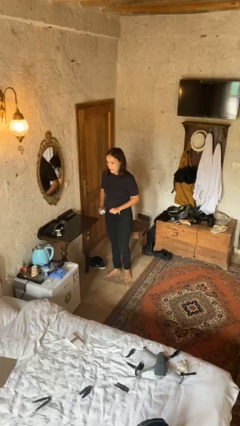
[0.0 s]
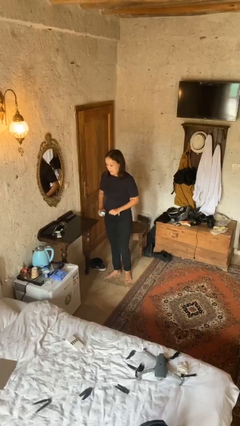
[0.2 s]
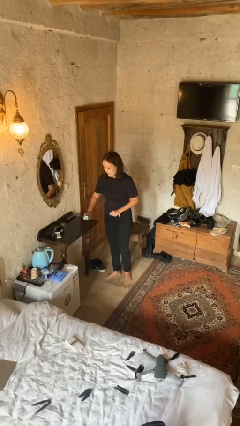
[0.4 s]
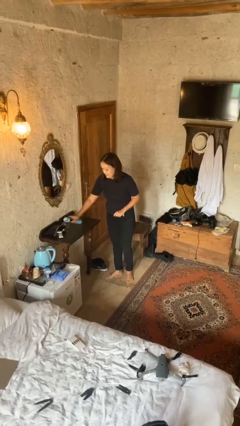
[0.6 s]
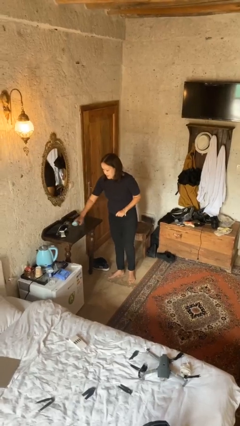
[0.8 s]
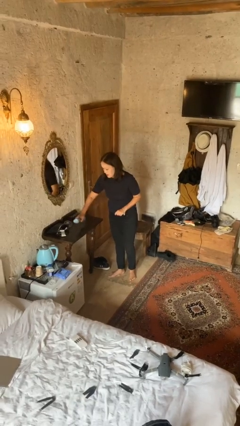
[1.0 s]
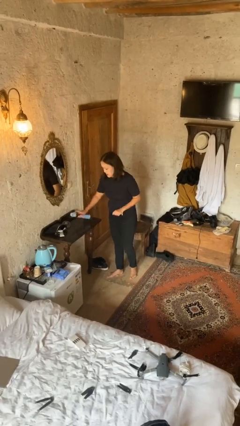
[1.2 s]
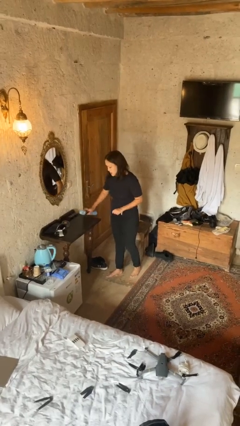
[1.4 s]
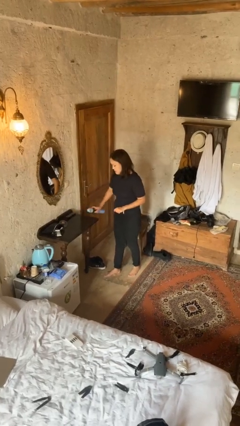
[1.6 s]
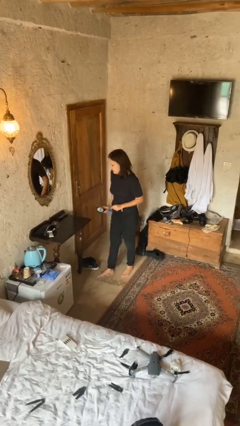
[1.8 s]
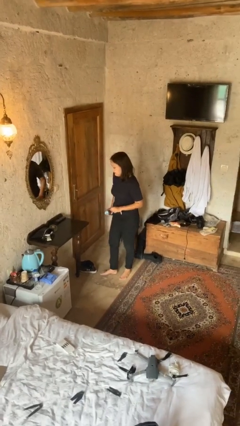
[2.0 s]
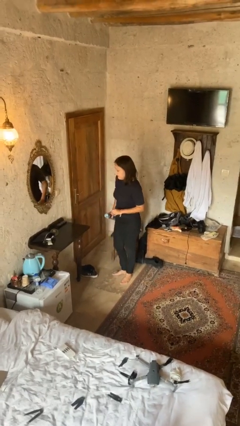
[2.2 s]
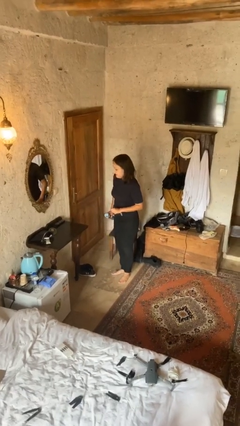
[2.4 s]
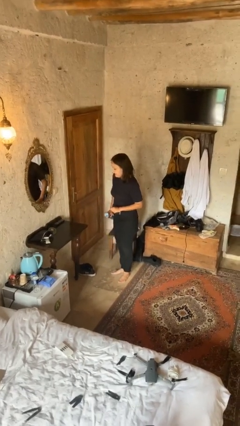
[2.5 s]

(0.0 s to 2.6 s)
person sprays from bottle

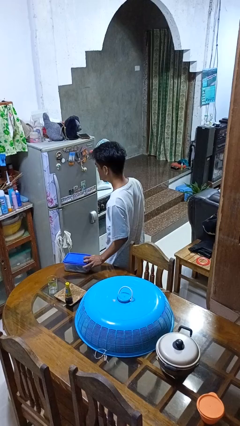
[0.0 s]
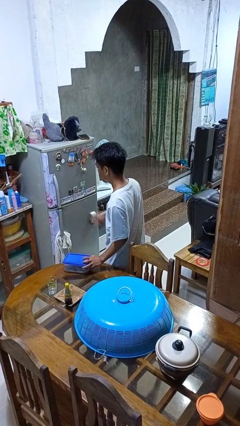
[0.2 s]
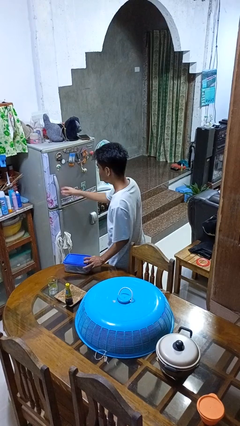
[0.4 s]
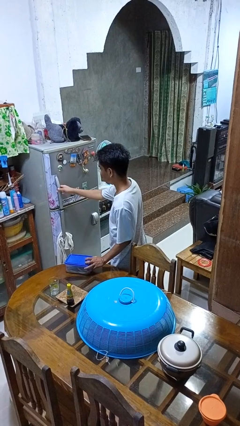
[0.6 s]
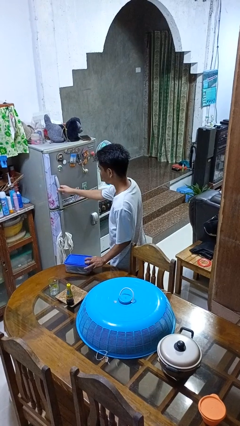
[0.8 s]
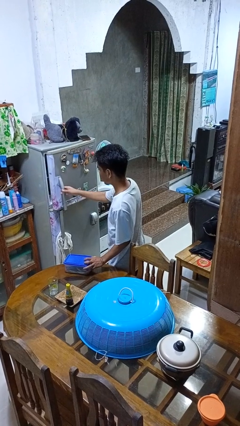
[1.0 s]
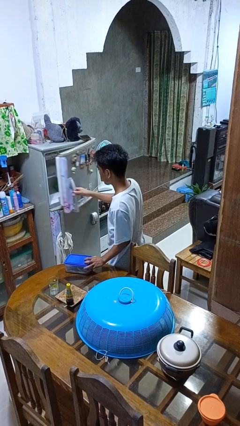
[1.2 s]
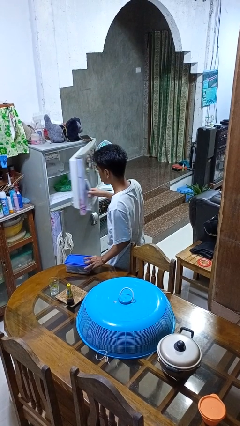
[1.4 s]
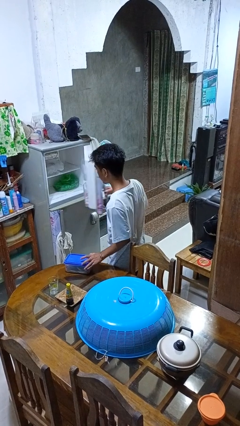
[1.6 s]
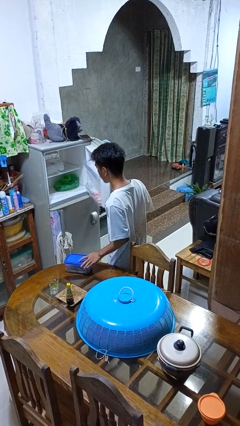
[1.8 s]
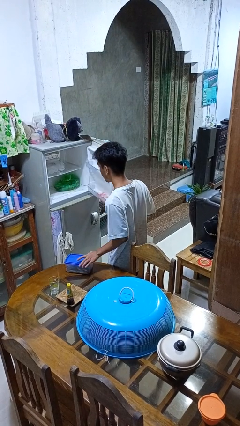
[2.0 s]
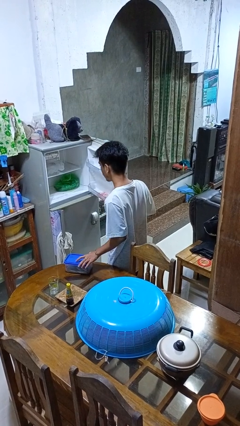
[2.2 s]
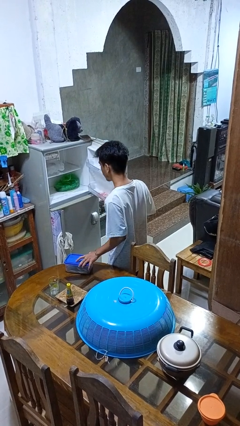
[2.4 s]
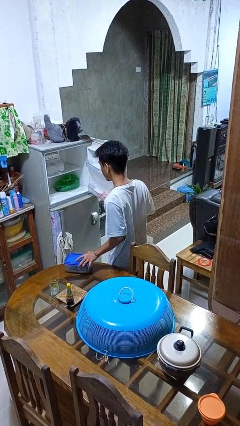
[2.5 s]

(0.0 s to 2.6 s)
person opens refrigerator

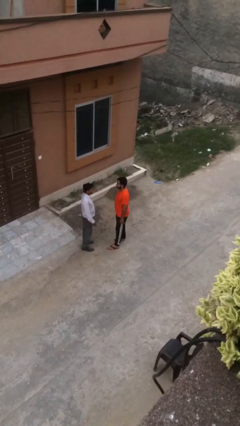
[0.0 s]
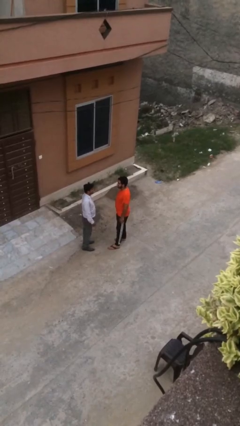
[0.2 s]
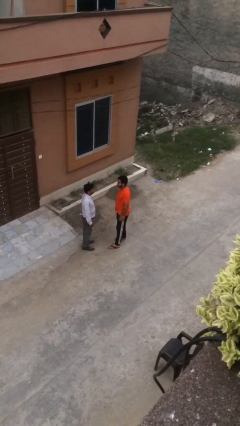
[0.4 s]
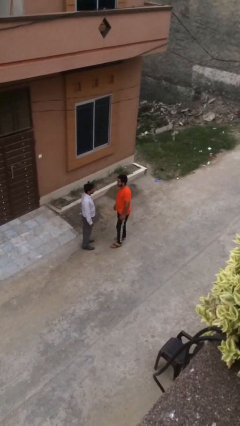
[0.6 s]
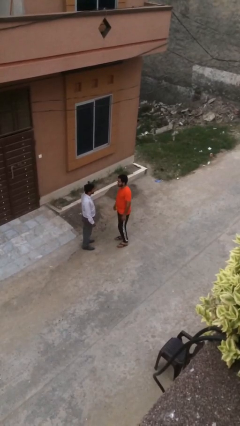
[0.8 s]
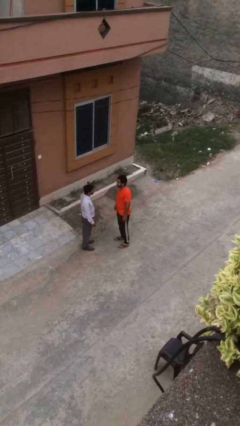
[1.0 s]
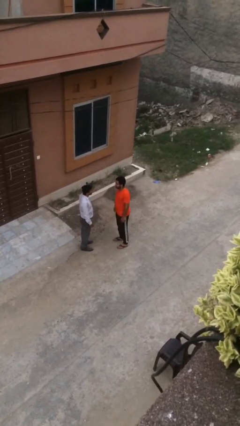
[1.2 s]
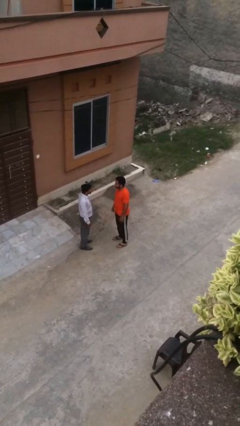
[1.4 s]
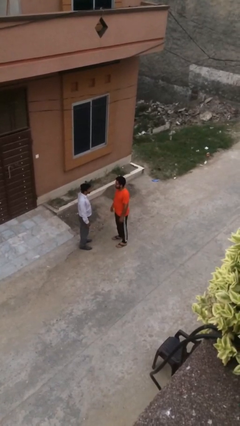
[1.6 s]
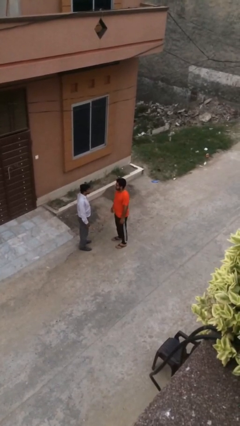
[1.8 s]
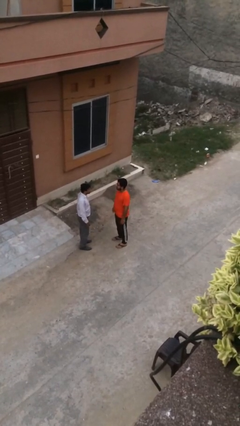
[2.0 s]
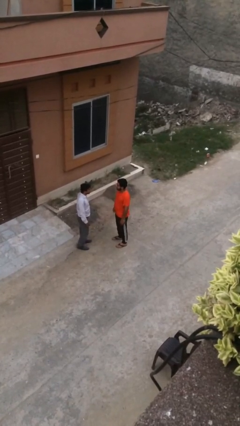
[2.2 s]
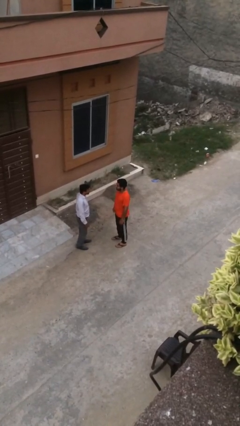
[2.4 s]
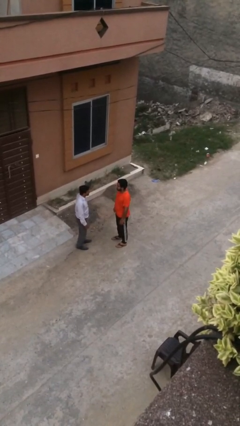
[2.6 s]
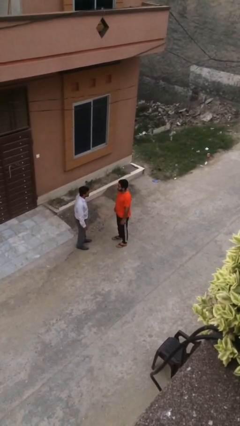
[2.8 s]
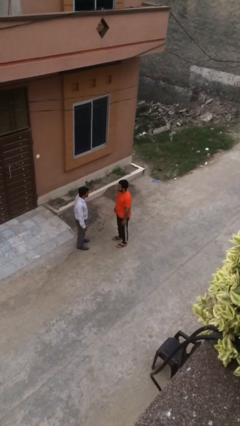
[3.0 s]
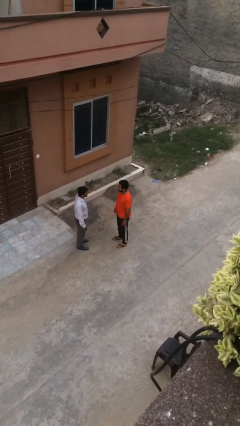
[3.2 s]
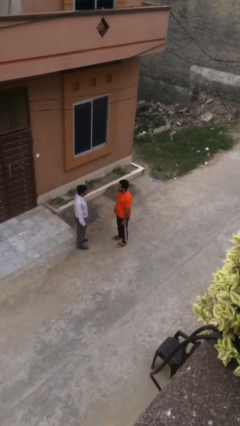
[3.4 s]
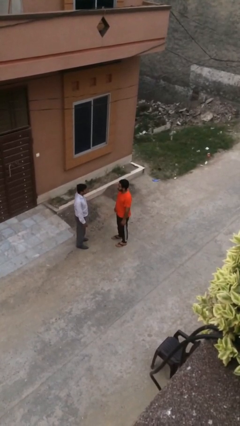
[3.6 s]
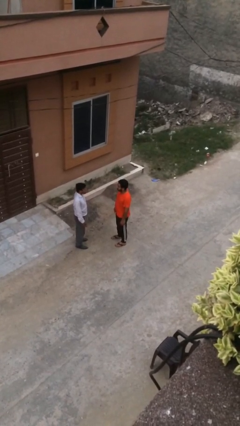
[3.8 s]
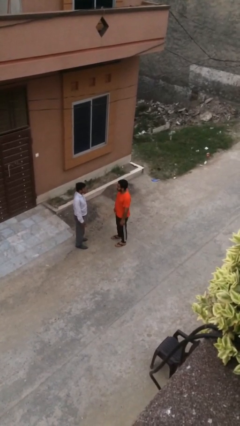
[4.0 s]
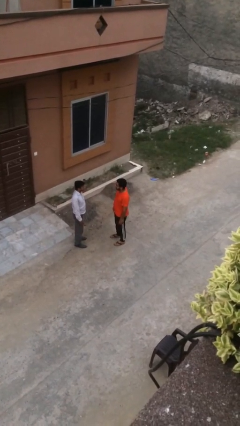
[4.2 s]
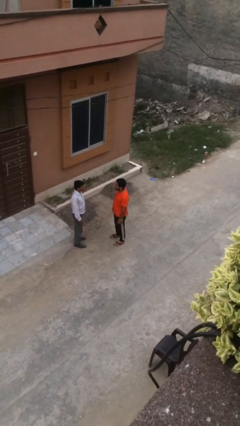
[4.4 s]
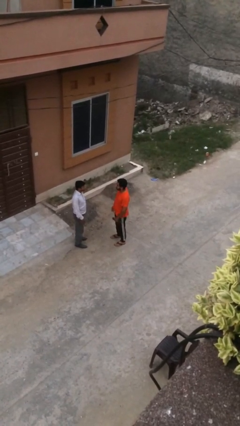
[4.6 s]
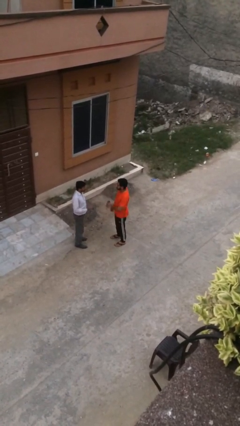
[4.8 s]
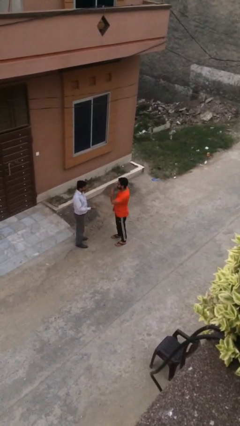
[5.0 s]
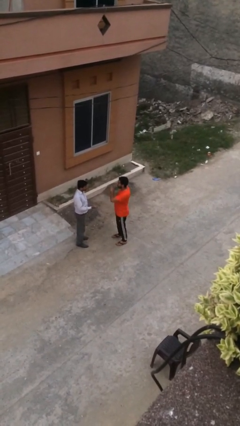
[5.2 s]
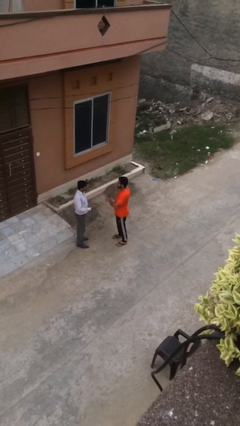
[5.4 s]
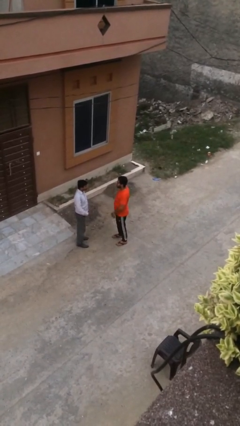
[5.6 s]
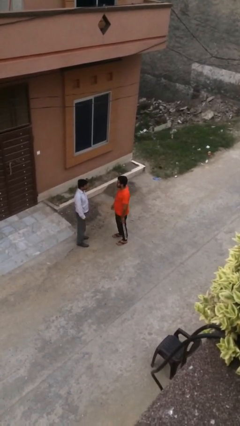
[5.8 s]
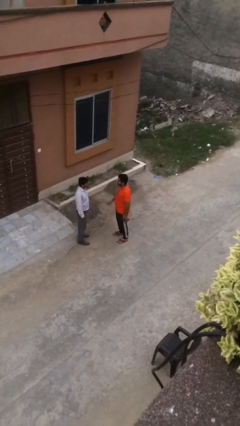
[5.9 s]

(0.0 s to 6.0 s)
person talks to person

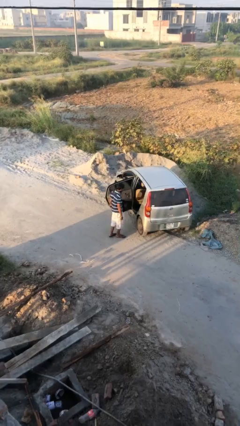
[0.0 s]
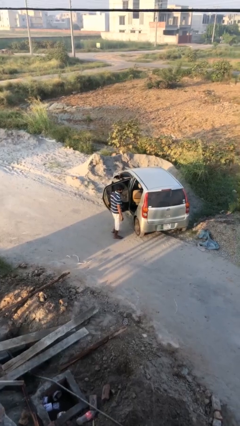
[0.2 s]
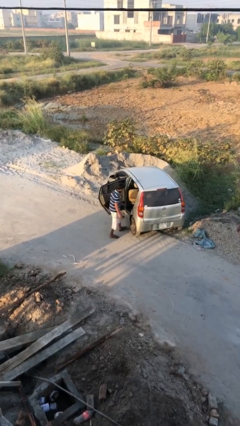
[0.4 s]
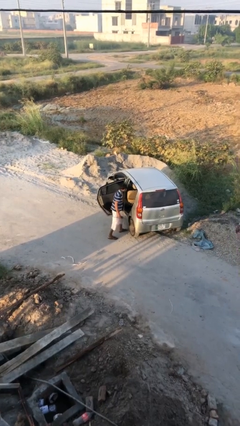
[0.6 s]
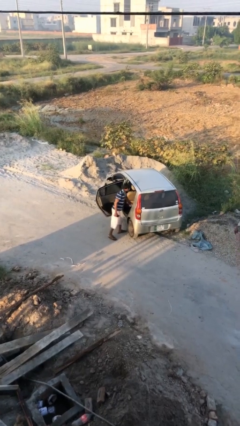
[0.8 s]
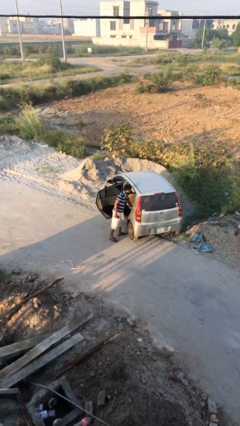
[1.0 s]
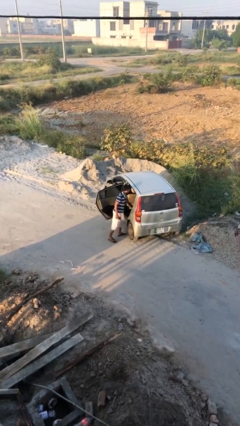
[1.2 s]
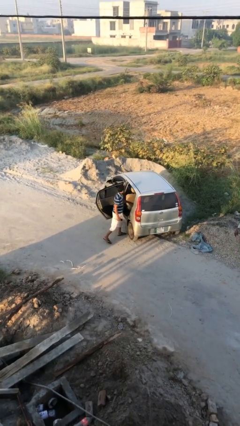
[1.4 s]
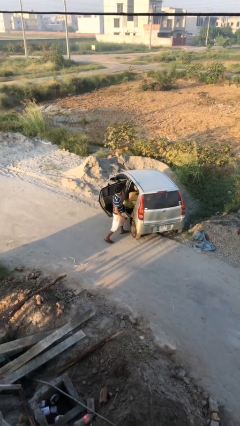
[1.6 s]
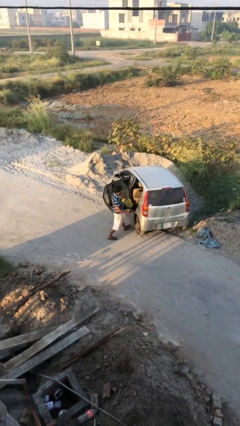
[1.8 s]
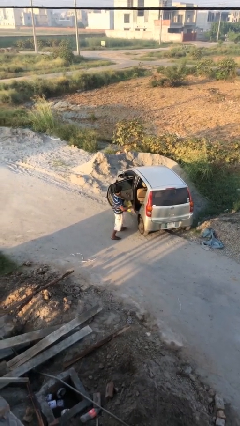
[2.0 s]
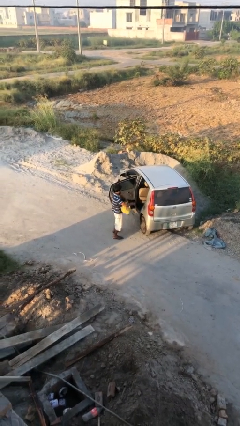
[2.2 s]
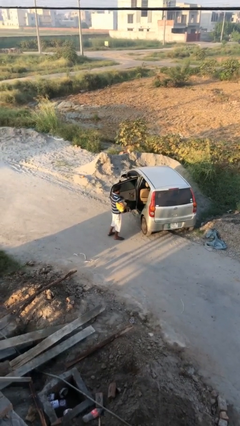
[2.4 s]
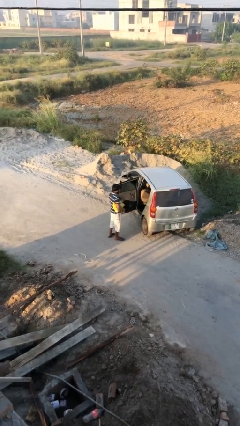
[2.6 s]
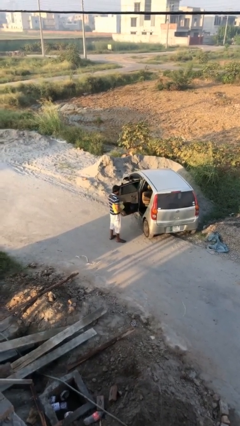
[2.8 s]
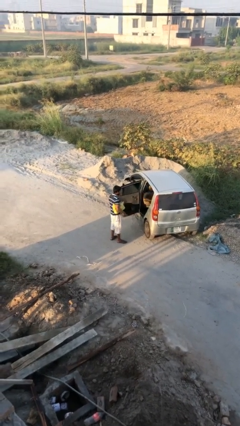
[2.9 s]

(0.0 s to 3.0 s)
person unloads car

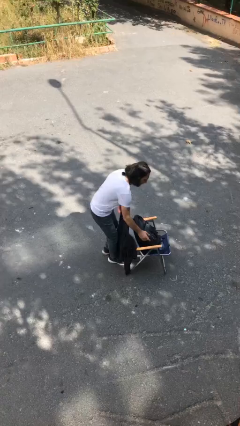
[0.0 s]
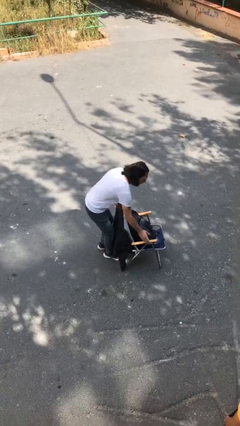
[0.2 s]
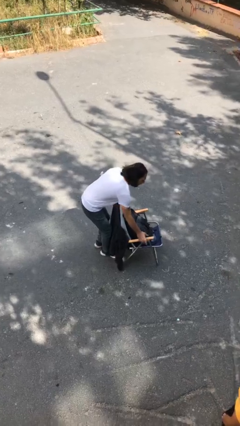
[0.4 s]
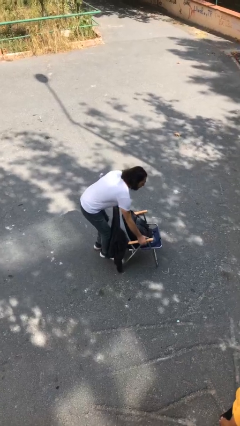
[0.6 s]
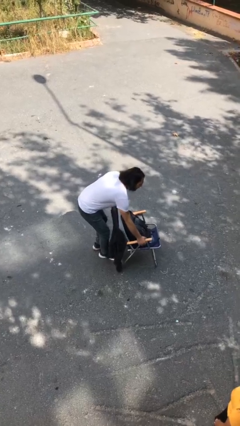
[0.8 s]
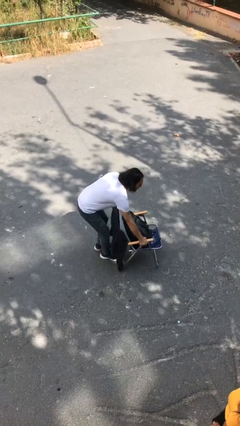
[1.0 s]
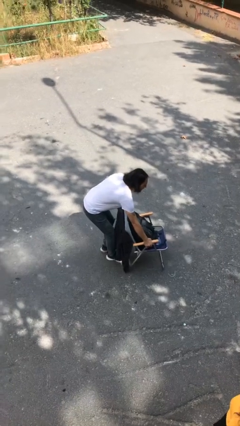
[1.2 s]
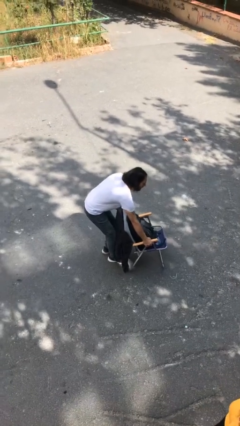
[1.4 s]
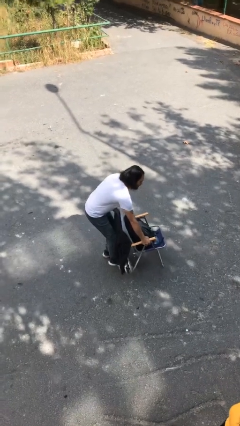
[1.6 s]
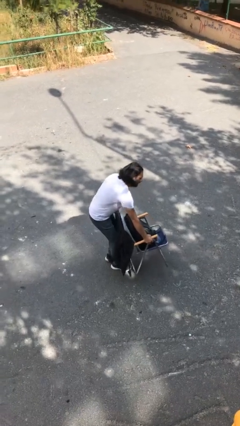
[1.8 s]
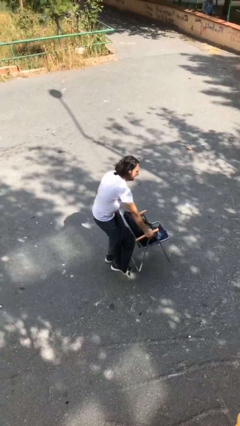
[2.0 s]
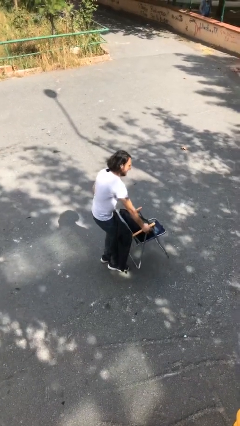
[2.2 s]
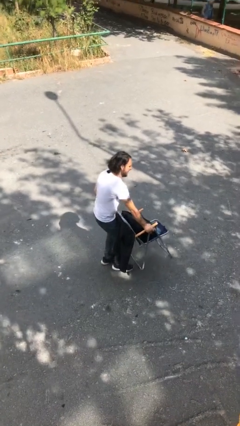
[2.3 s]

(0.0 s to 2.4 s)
person picks up object from floor

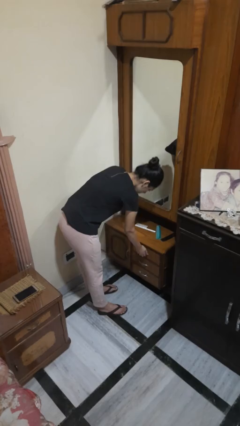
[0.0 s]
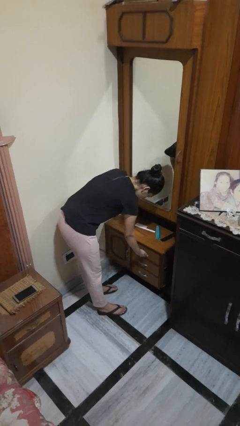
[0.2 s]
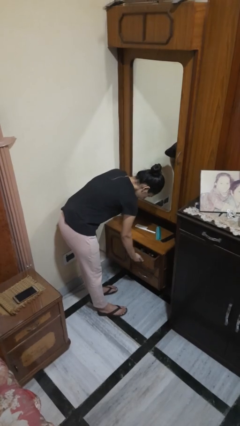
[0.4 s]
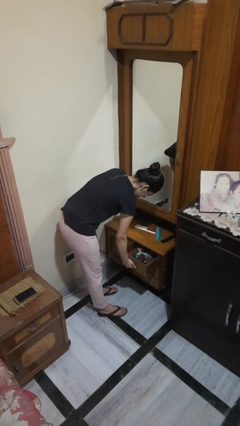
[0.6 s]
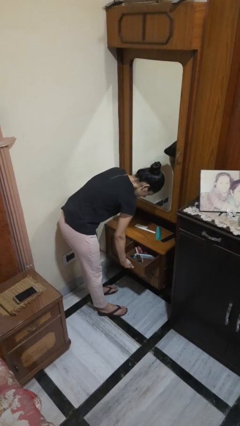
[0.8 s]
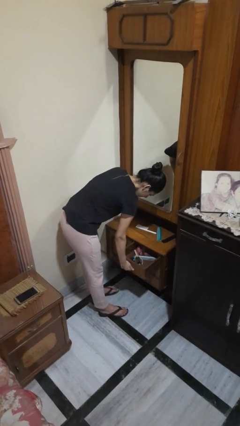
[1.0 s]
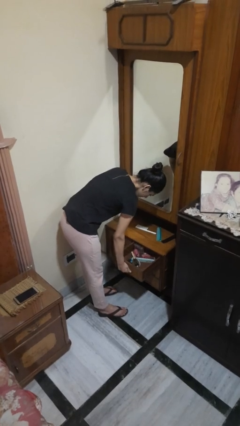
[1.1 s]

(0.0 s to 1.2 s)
person opens dresser drawer
